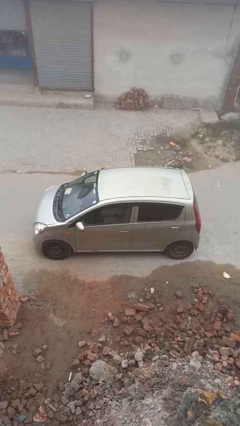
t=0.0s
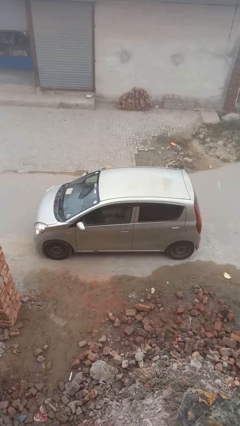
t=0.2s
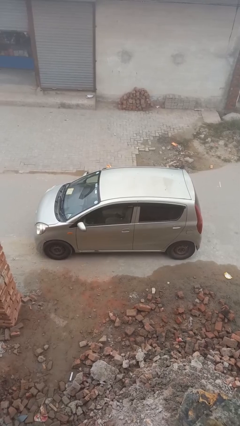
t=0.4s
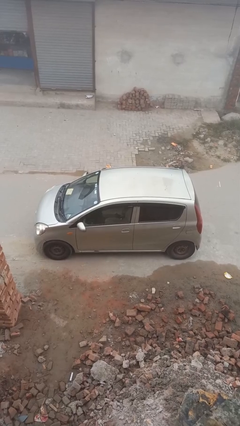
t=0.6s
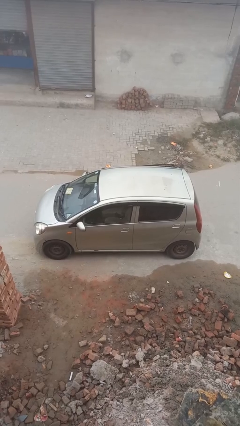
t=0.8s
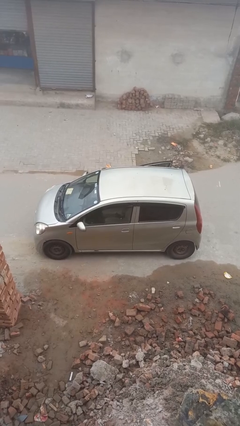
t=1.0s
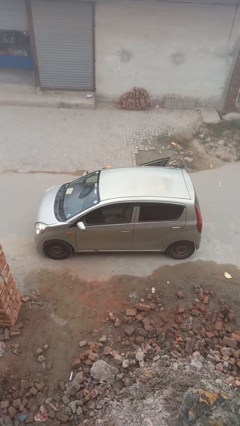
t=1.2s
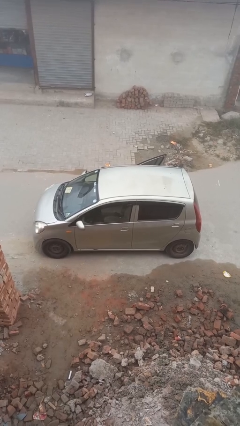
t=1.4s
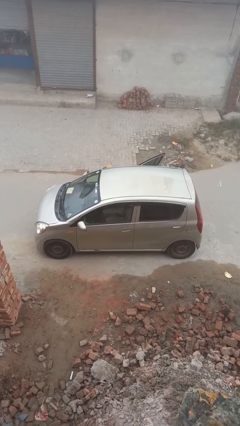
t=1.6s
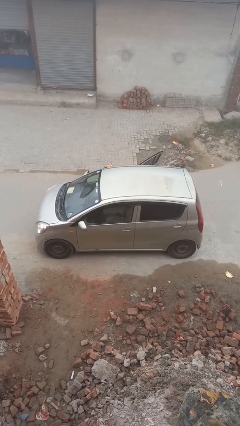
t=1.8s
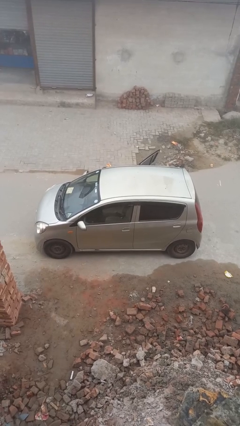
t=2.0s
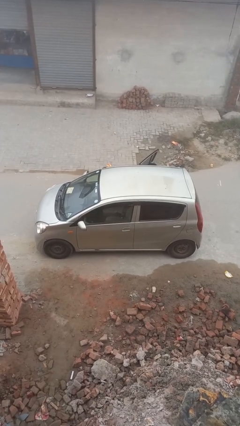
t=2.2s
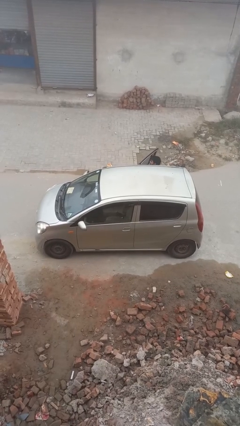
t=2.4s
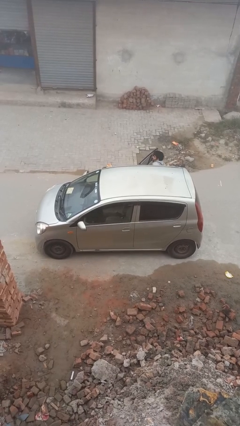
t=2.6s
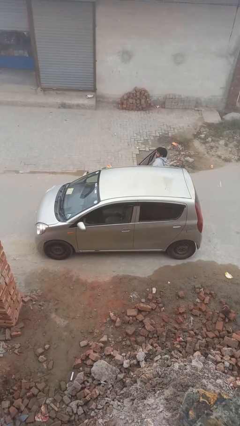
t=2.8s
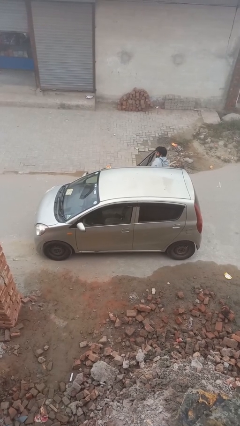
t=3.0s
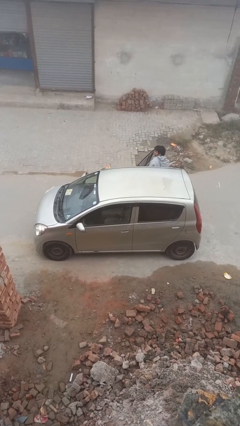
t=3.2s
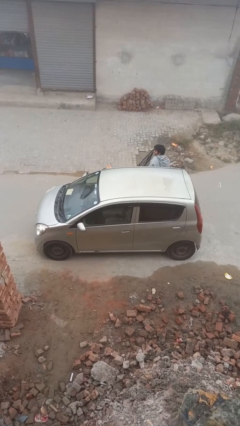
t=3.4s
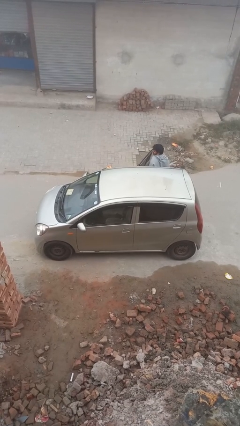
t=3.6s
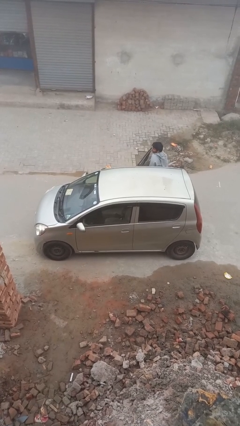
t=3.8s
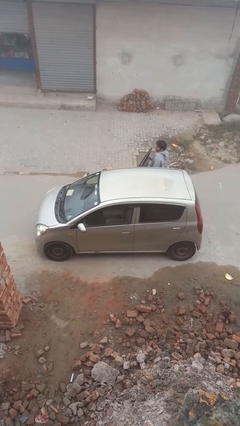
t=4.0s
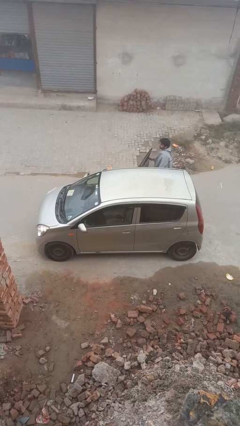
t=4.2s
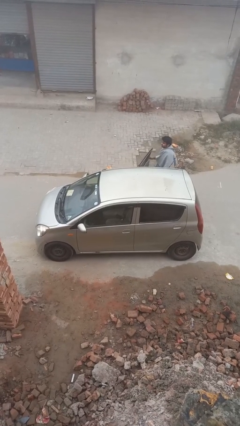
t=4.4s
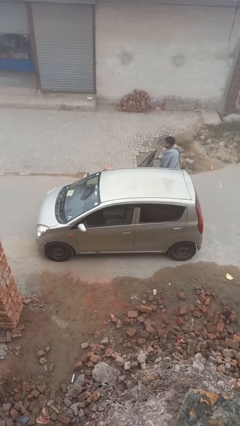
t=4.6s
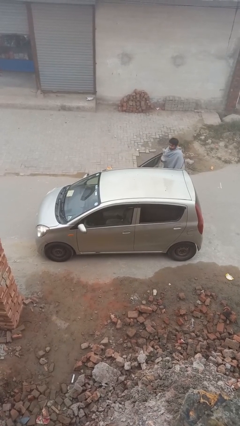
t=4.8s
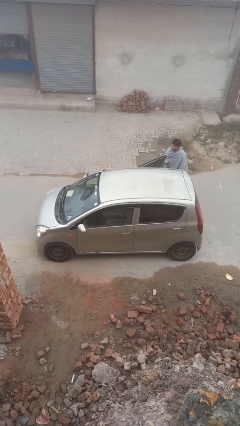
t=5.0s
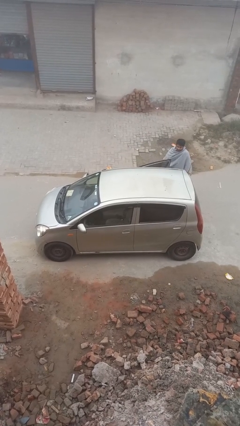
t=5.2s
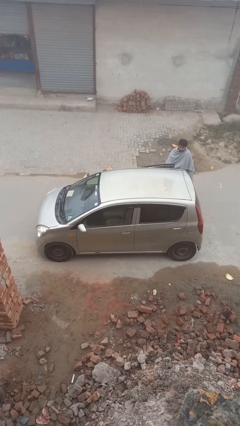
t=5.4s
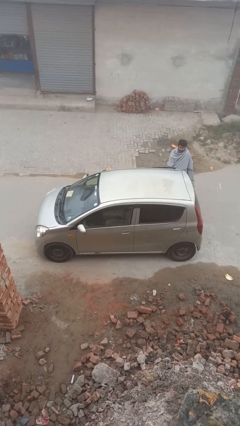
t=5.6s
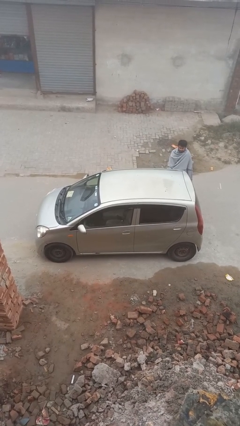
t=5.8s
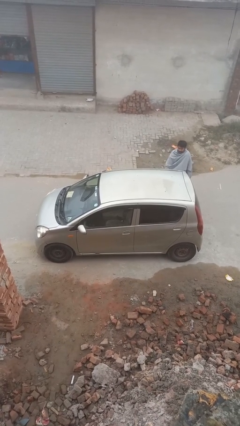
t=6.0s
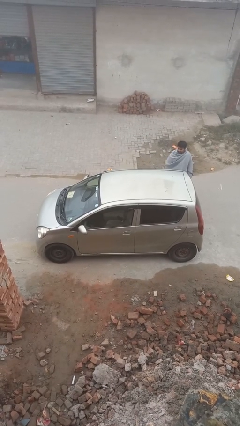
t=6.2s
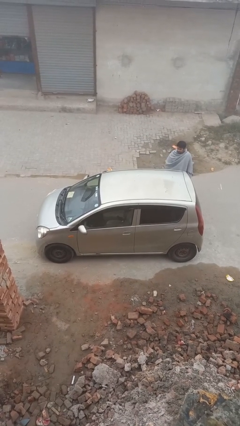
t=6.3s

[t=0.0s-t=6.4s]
car drops off person

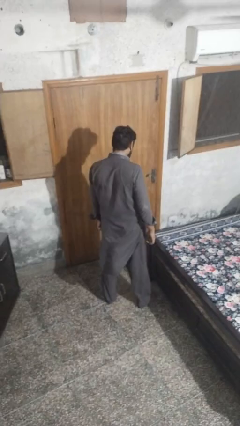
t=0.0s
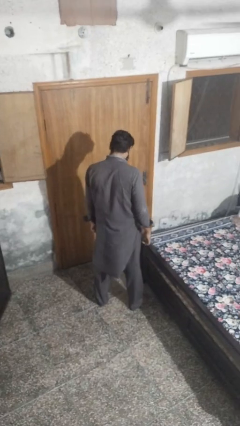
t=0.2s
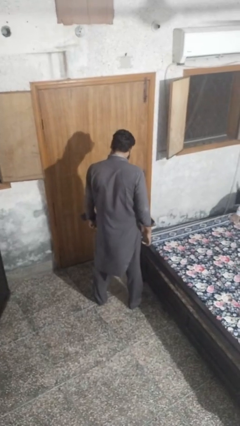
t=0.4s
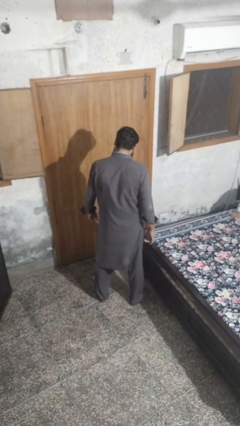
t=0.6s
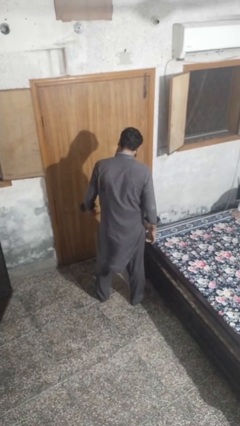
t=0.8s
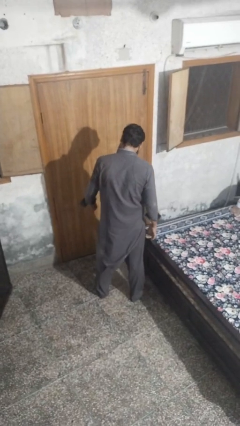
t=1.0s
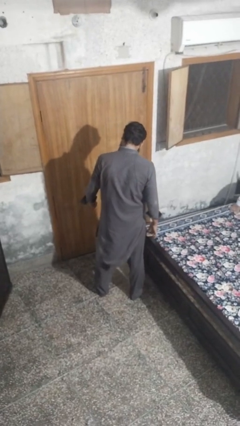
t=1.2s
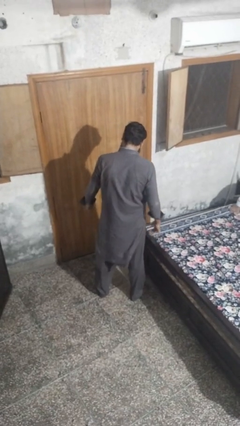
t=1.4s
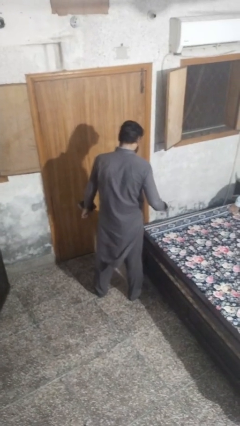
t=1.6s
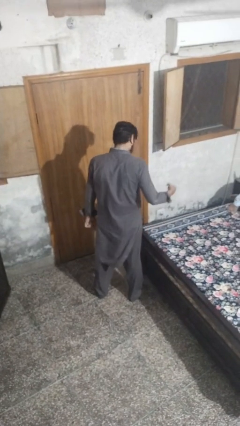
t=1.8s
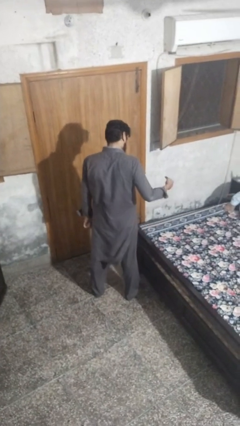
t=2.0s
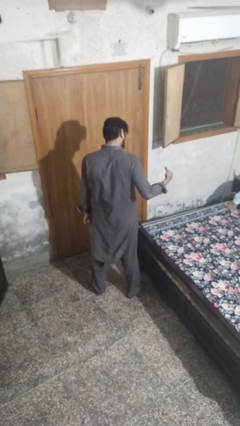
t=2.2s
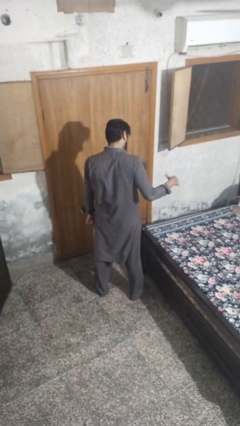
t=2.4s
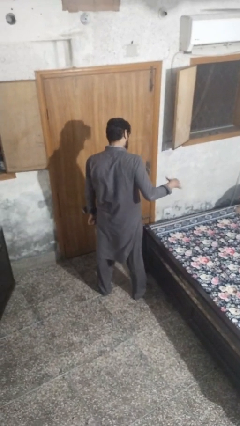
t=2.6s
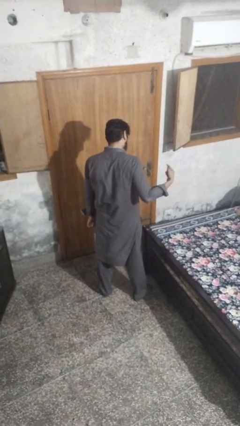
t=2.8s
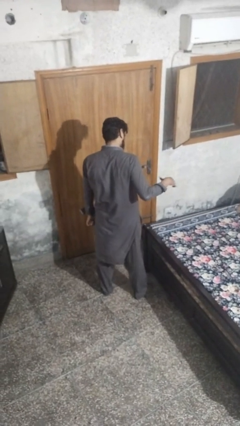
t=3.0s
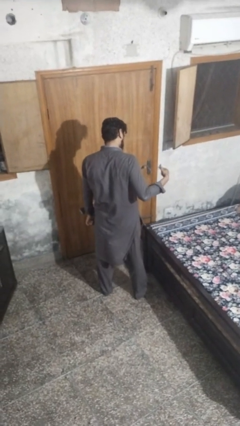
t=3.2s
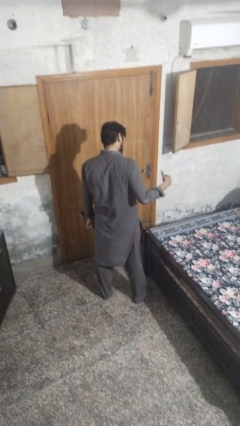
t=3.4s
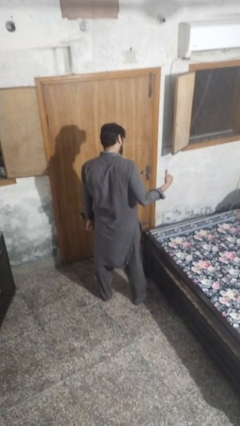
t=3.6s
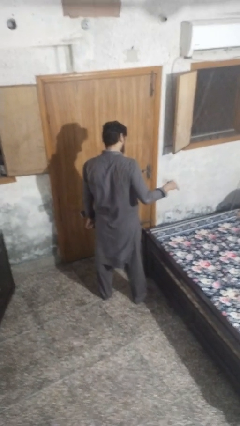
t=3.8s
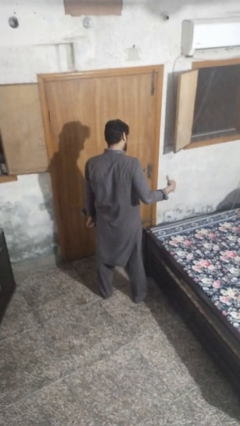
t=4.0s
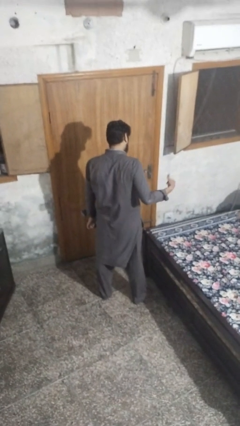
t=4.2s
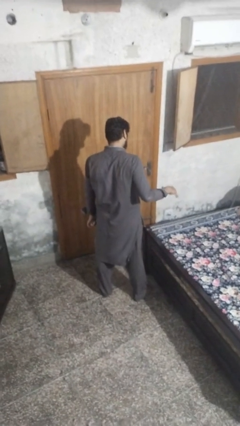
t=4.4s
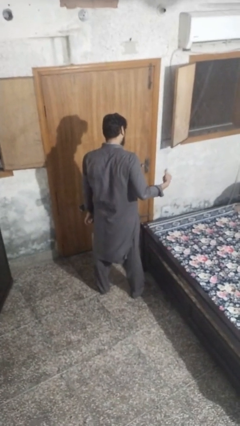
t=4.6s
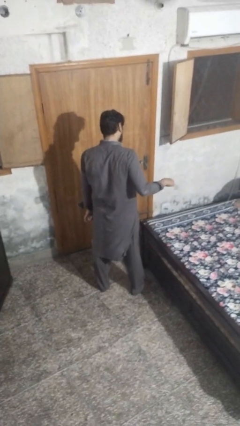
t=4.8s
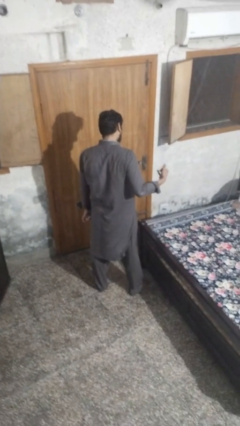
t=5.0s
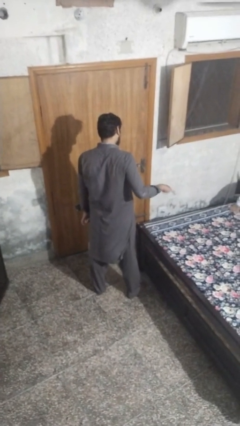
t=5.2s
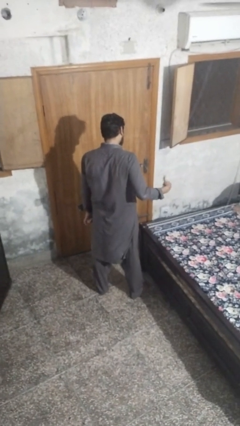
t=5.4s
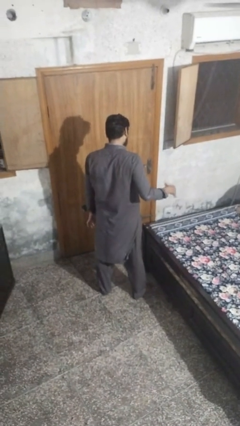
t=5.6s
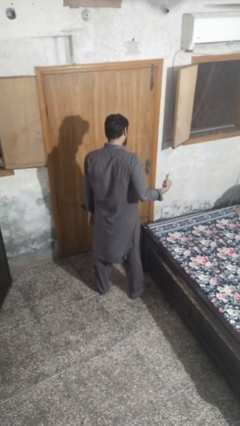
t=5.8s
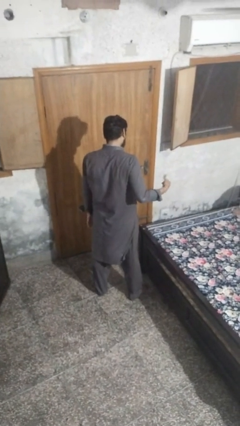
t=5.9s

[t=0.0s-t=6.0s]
person gestures hang loose

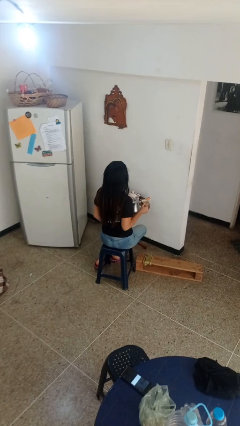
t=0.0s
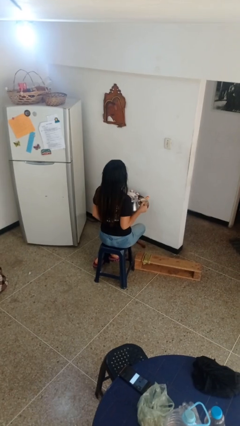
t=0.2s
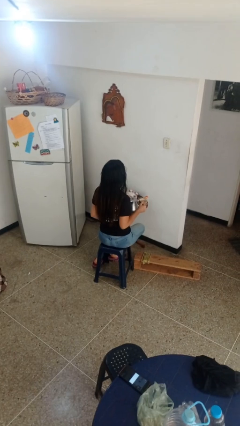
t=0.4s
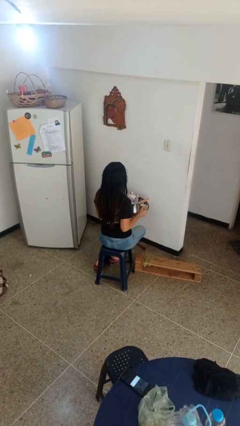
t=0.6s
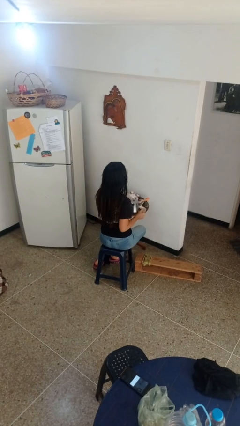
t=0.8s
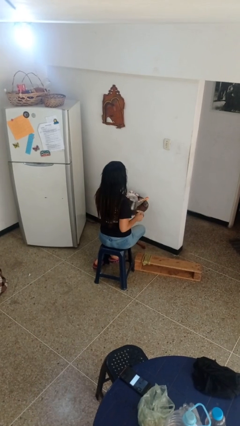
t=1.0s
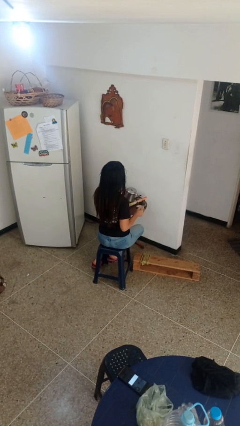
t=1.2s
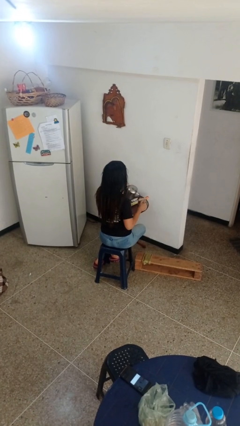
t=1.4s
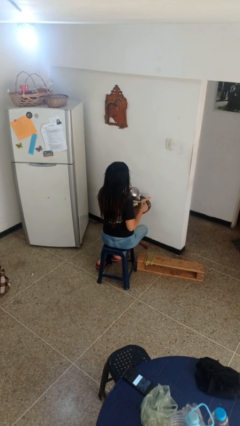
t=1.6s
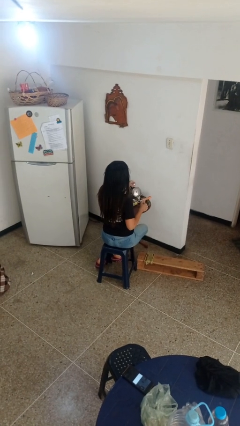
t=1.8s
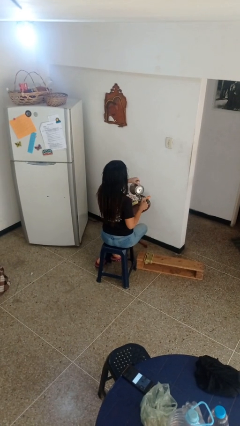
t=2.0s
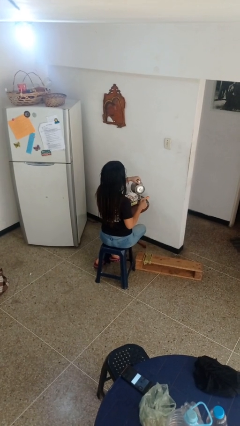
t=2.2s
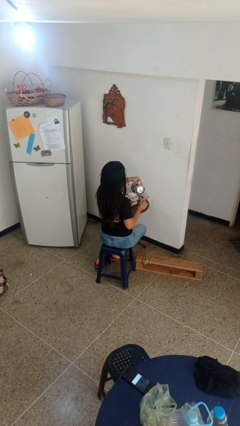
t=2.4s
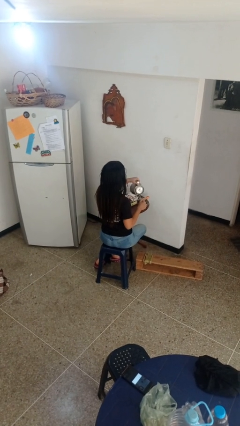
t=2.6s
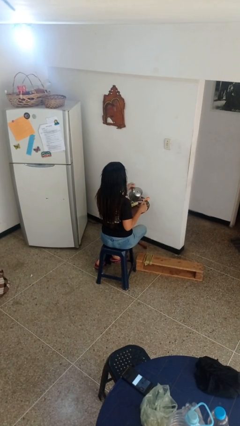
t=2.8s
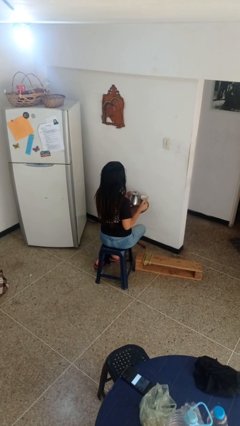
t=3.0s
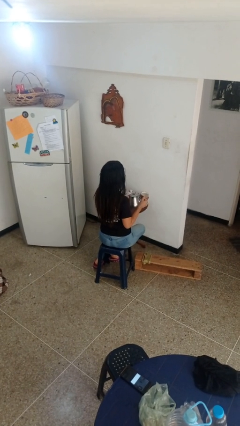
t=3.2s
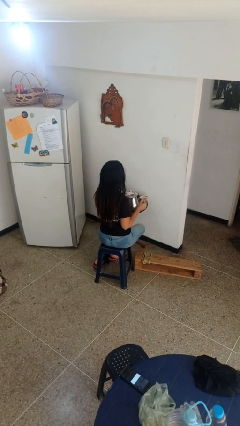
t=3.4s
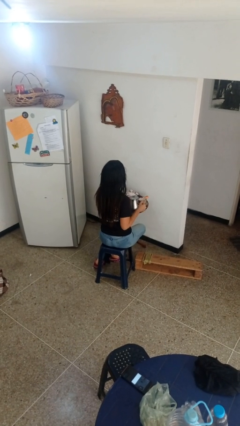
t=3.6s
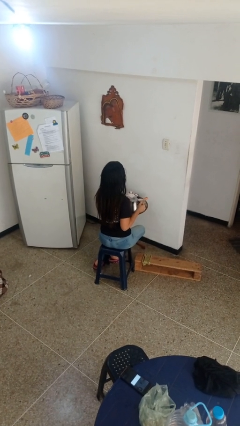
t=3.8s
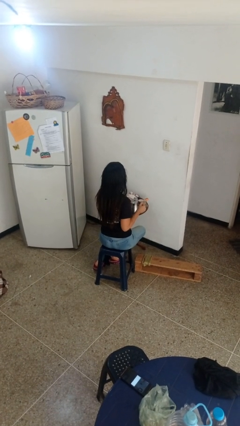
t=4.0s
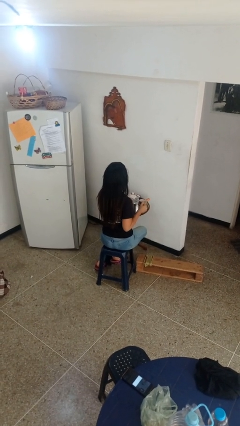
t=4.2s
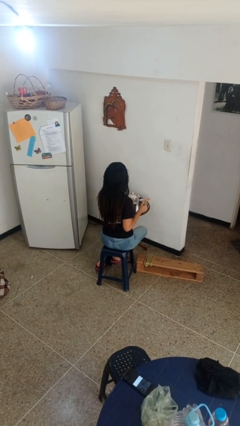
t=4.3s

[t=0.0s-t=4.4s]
person pours coffee into mug

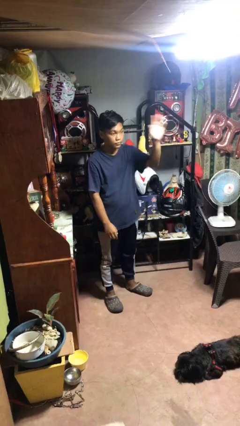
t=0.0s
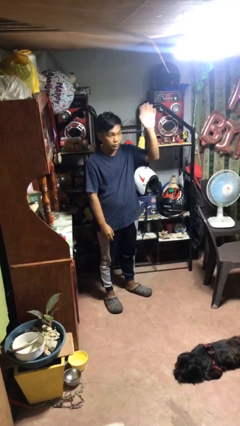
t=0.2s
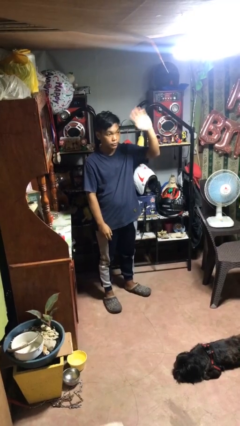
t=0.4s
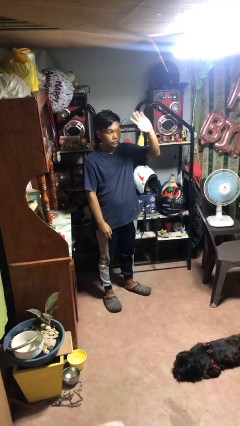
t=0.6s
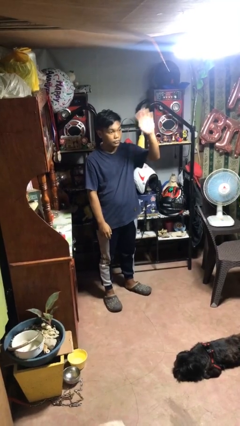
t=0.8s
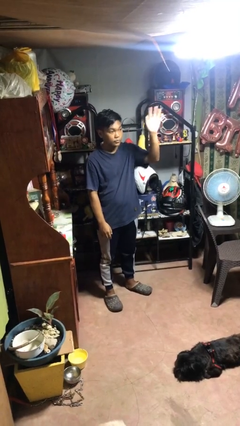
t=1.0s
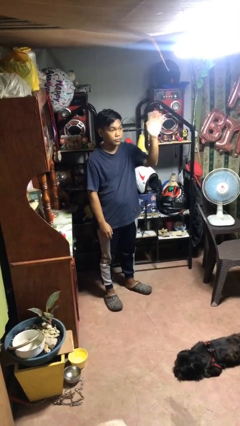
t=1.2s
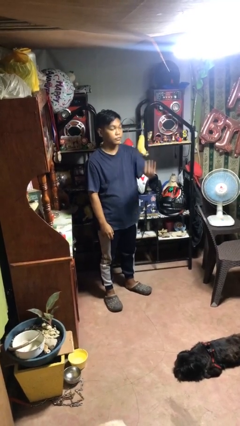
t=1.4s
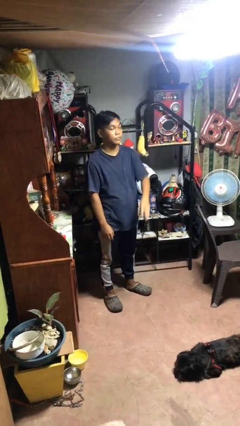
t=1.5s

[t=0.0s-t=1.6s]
person waves at person
